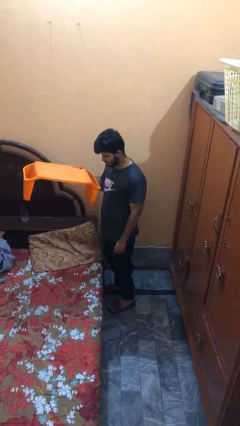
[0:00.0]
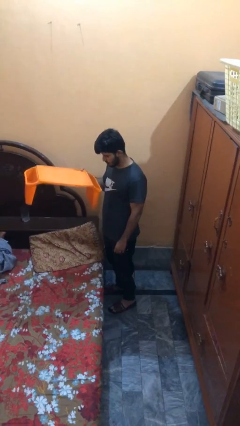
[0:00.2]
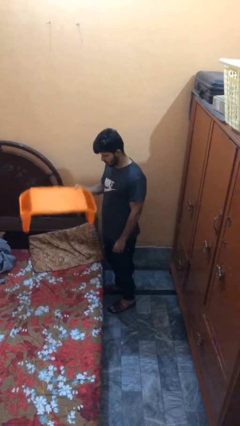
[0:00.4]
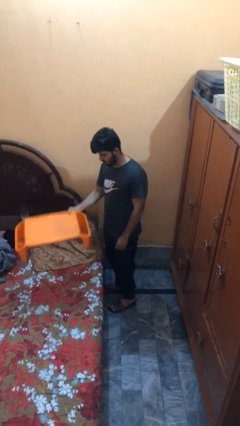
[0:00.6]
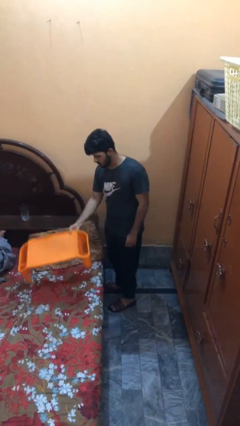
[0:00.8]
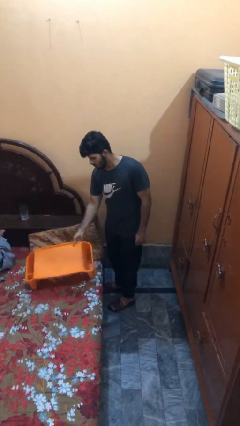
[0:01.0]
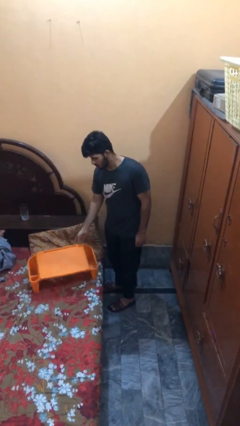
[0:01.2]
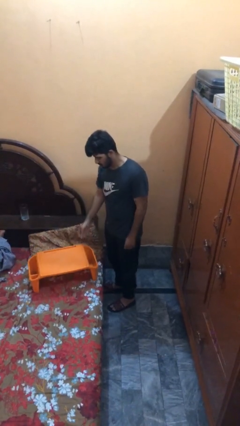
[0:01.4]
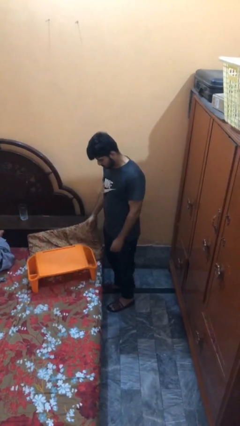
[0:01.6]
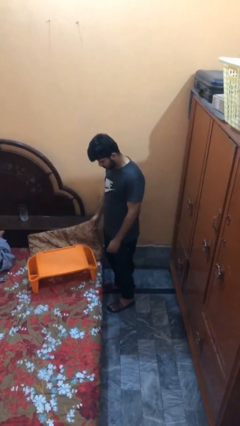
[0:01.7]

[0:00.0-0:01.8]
person puts down object on bed

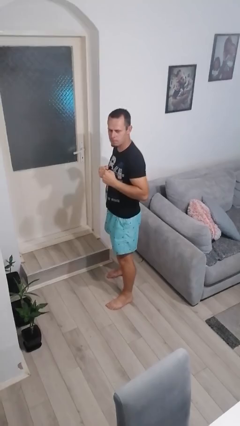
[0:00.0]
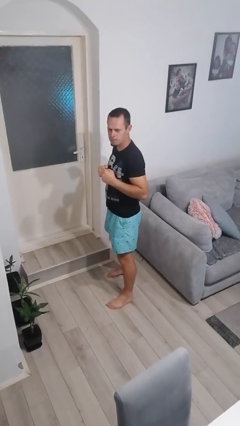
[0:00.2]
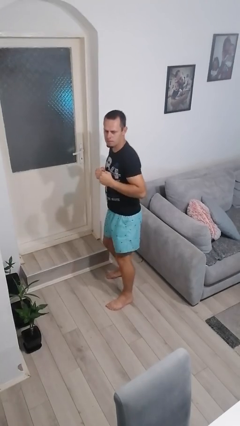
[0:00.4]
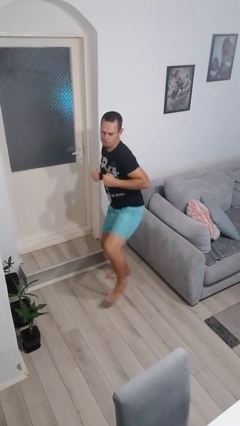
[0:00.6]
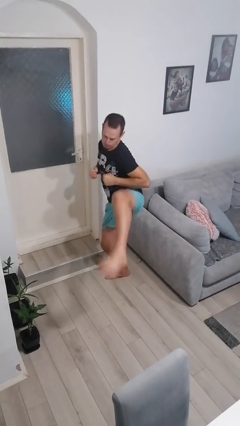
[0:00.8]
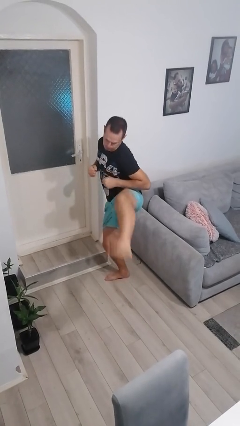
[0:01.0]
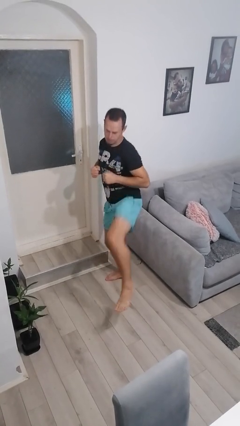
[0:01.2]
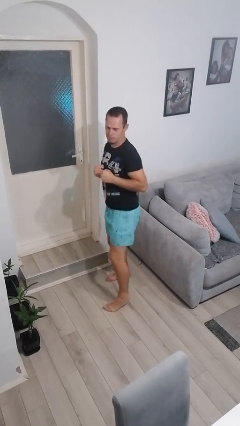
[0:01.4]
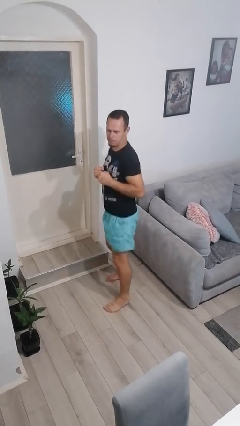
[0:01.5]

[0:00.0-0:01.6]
person karate kicks

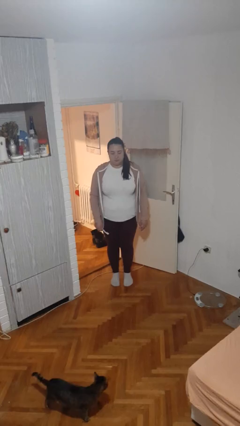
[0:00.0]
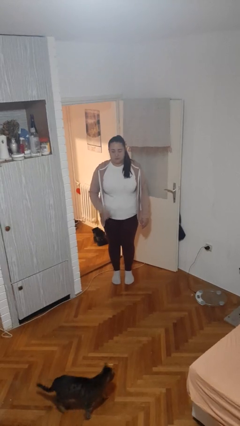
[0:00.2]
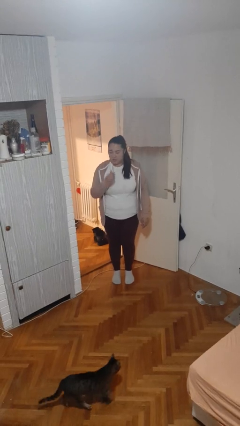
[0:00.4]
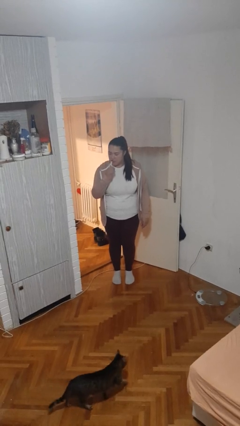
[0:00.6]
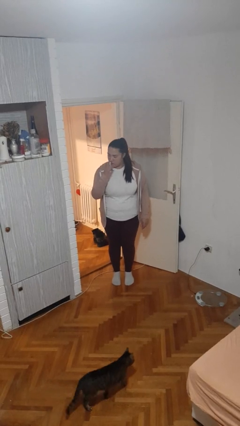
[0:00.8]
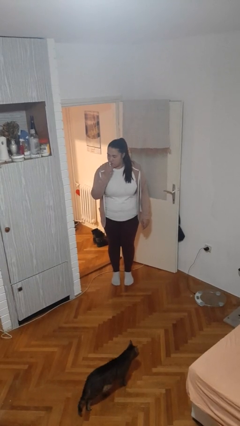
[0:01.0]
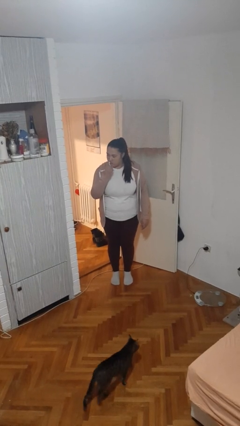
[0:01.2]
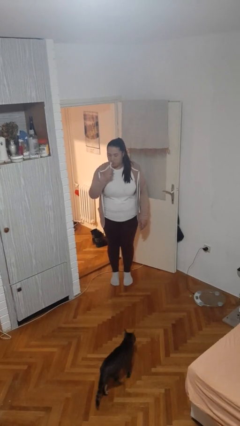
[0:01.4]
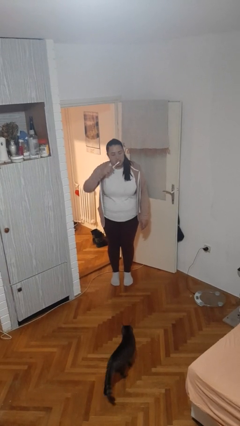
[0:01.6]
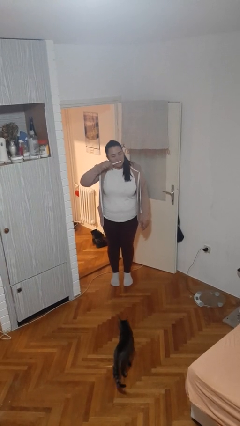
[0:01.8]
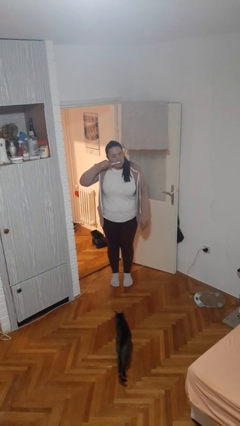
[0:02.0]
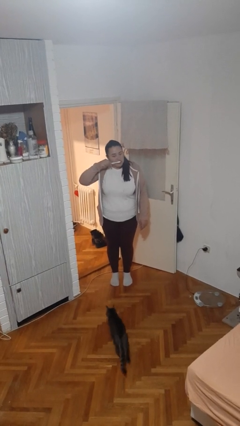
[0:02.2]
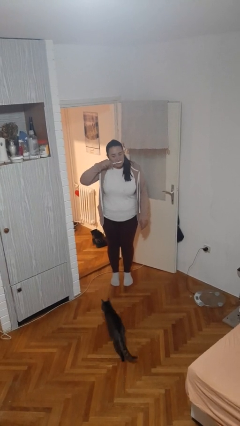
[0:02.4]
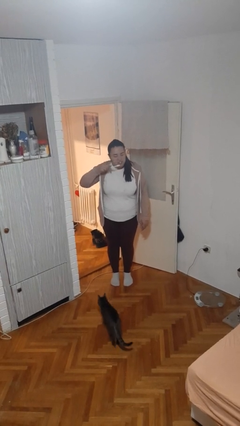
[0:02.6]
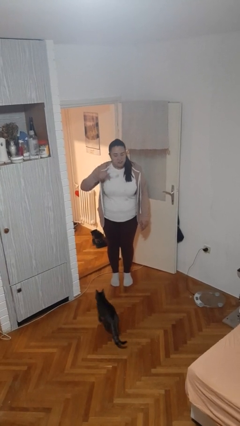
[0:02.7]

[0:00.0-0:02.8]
person brushes hair

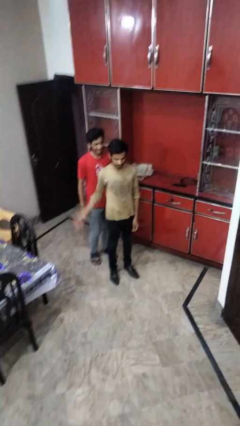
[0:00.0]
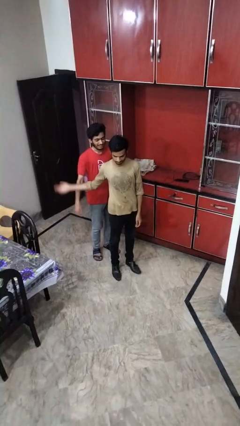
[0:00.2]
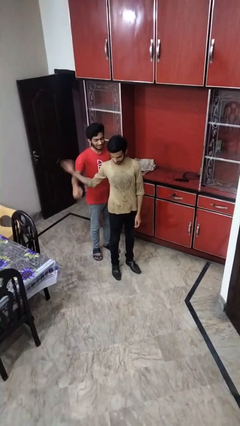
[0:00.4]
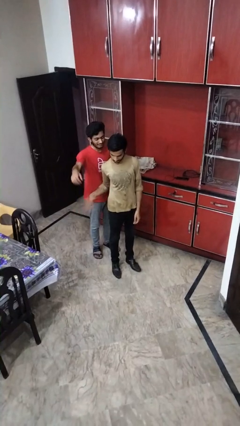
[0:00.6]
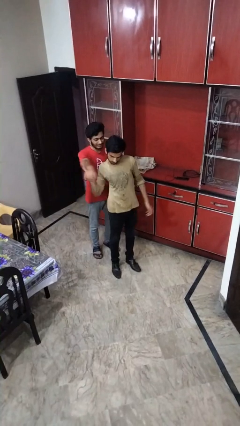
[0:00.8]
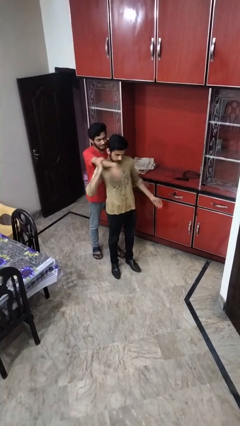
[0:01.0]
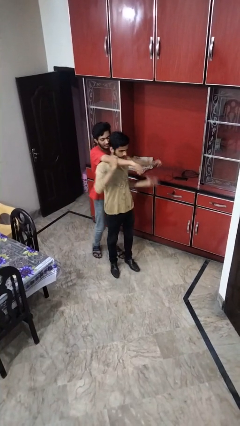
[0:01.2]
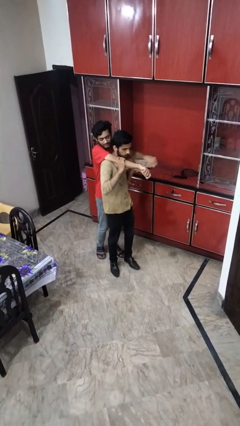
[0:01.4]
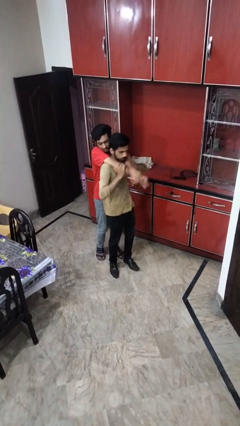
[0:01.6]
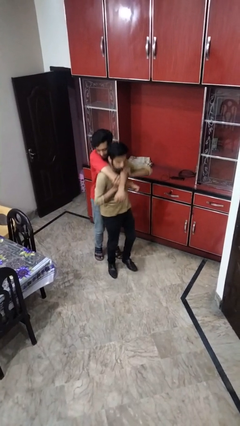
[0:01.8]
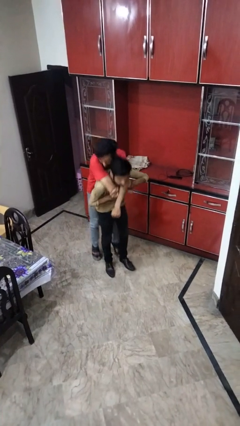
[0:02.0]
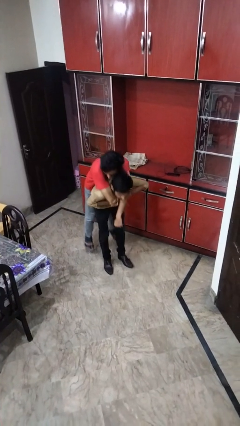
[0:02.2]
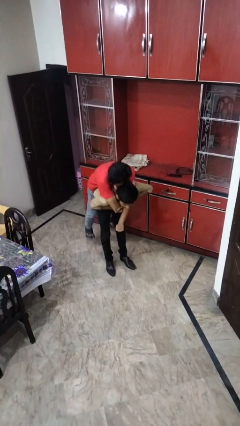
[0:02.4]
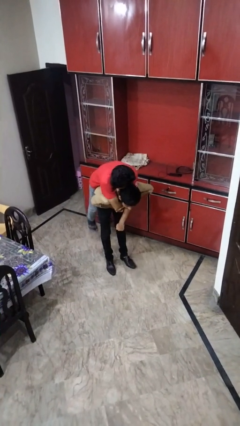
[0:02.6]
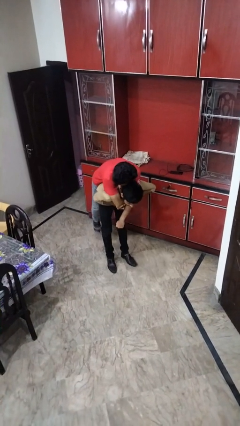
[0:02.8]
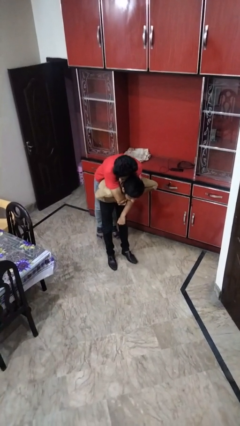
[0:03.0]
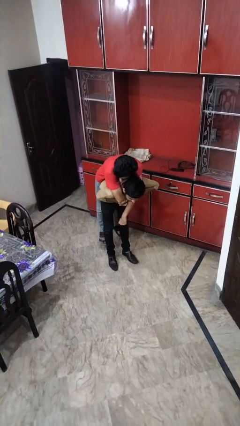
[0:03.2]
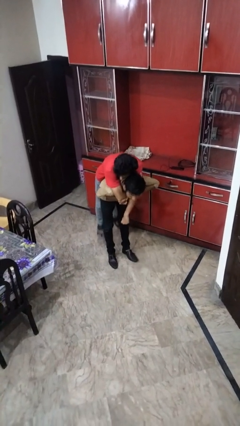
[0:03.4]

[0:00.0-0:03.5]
person carries person over shoulder

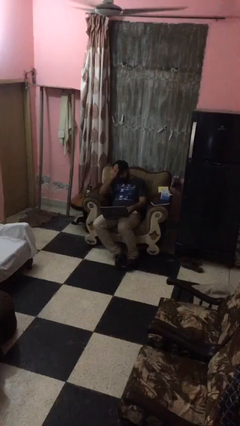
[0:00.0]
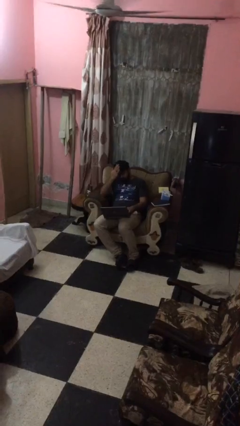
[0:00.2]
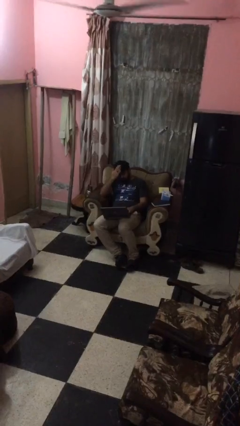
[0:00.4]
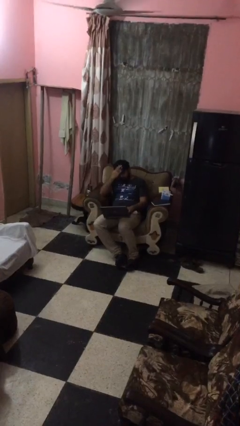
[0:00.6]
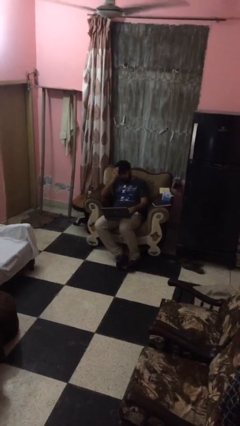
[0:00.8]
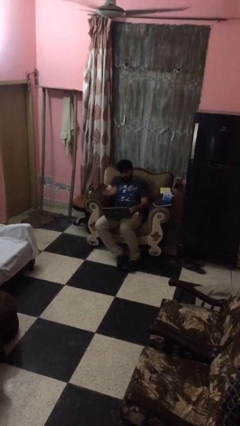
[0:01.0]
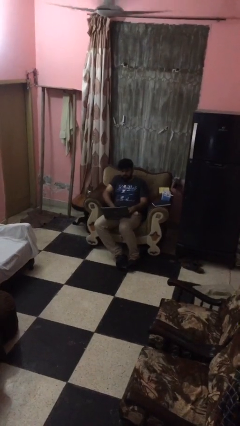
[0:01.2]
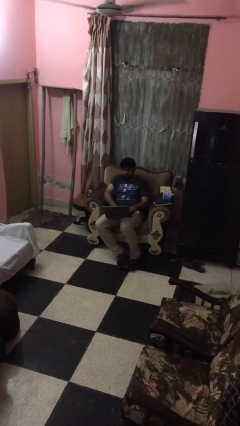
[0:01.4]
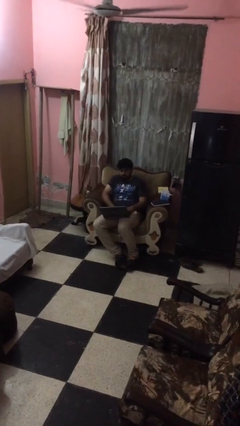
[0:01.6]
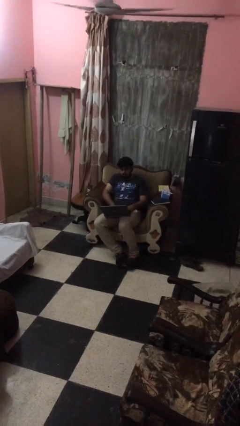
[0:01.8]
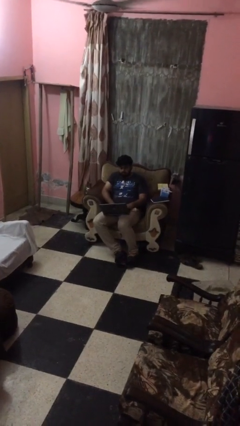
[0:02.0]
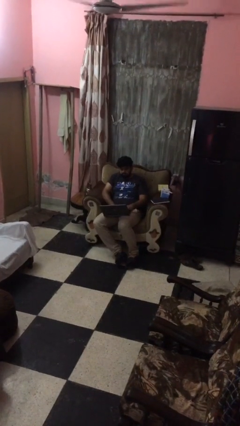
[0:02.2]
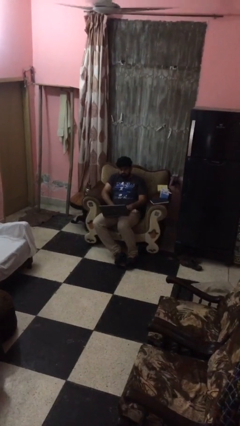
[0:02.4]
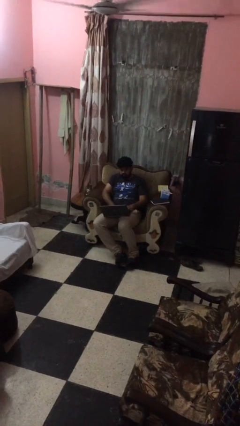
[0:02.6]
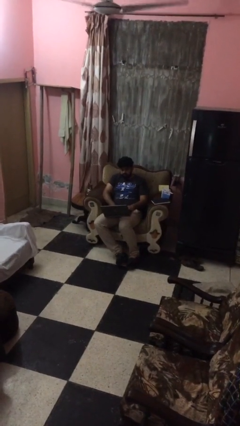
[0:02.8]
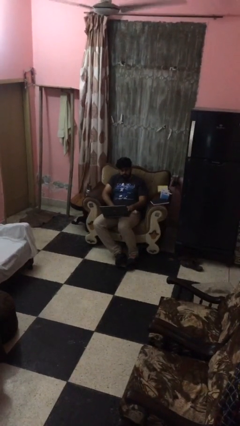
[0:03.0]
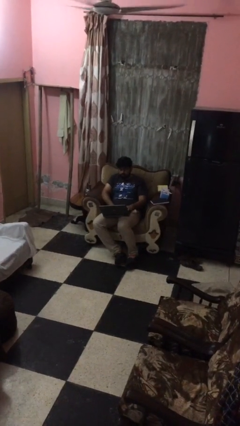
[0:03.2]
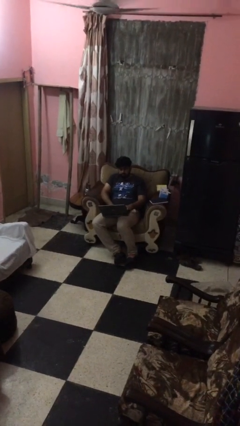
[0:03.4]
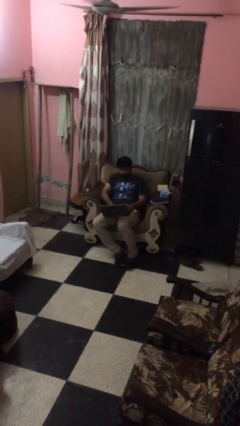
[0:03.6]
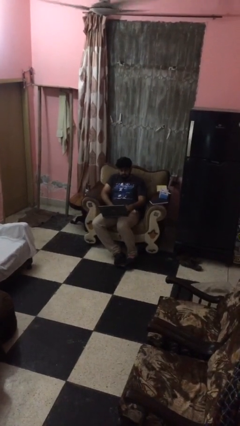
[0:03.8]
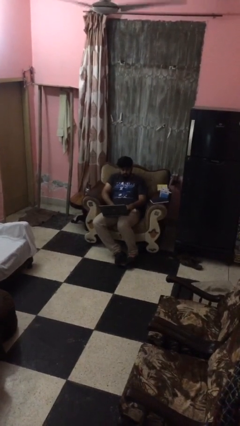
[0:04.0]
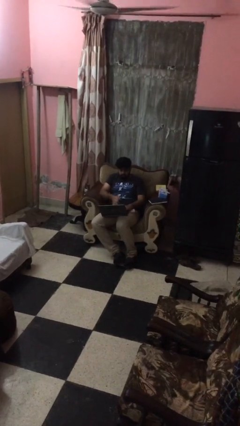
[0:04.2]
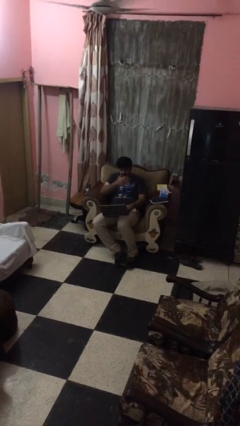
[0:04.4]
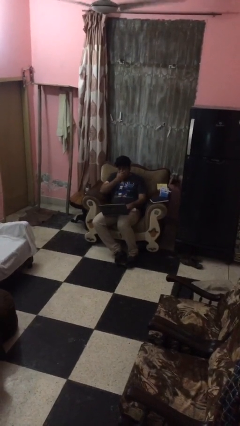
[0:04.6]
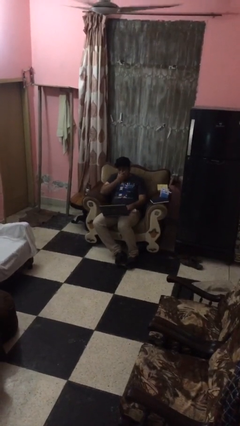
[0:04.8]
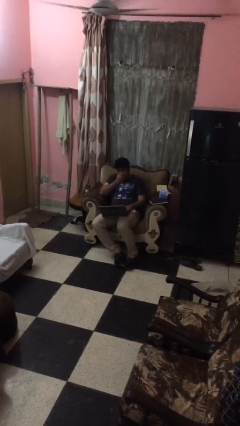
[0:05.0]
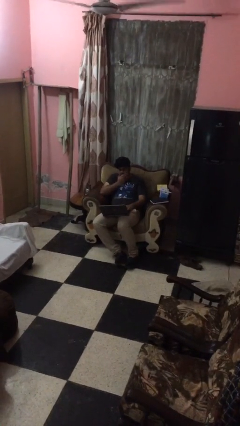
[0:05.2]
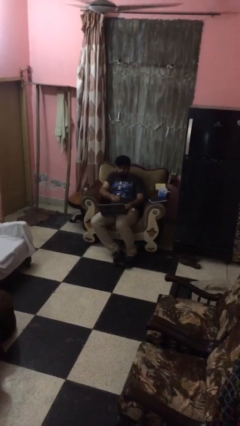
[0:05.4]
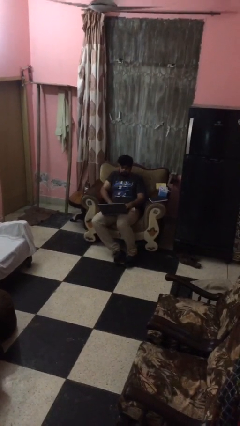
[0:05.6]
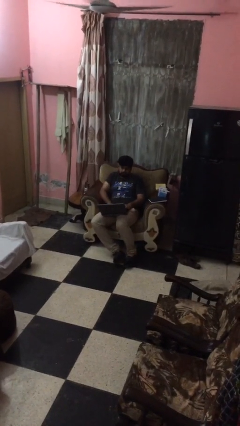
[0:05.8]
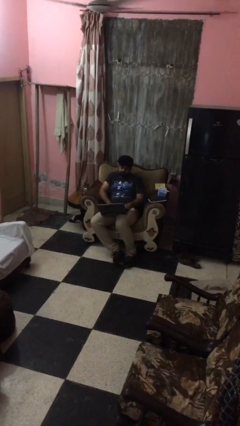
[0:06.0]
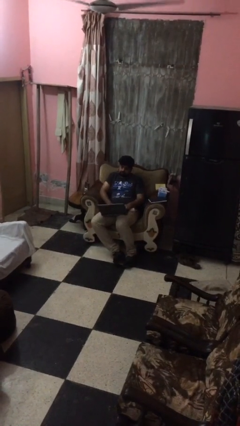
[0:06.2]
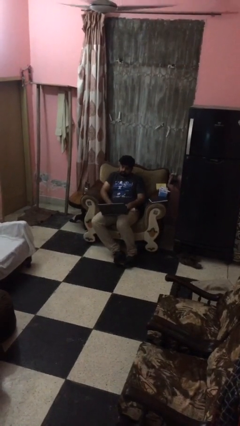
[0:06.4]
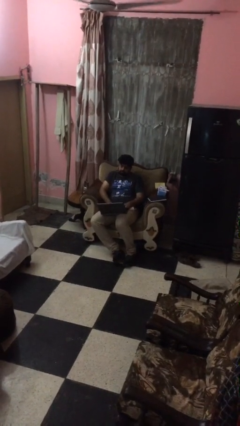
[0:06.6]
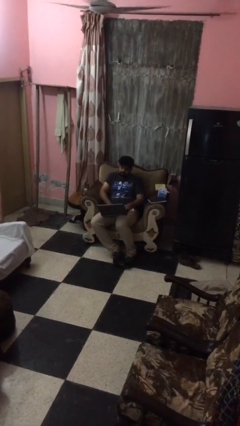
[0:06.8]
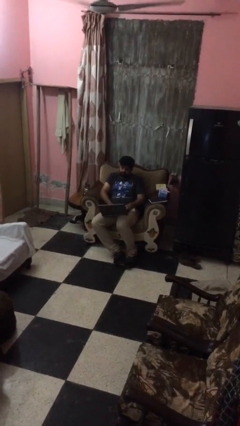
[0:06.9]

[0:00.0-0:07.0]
person interacts with laptop

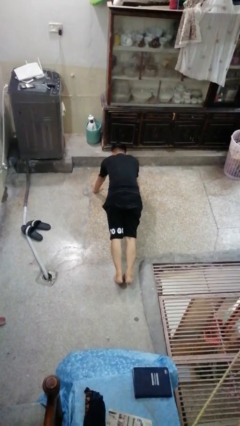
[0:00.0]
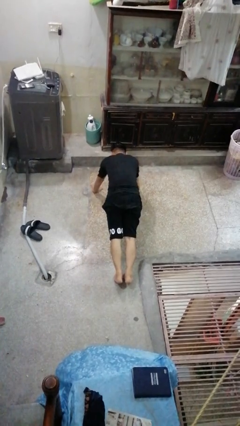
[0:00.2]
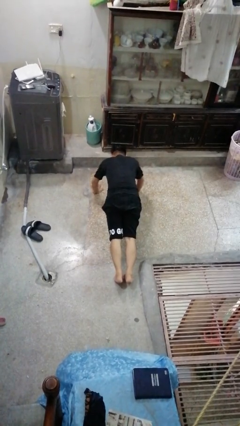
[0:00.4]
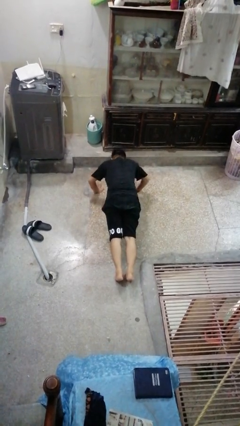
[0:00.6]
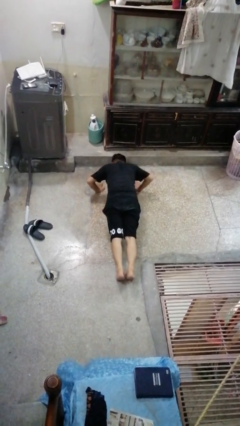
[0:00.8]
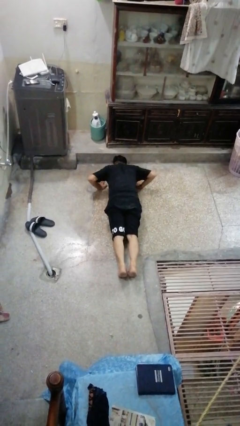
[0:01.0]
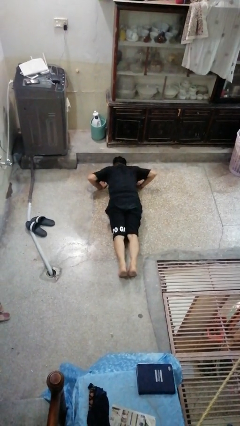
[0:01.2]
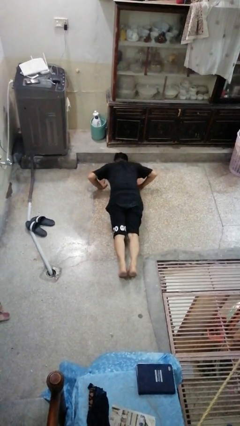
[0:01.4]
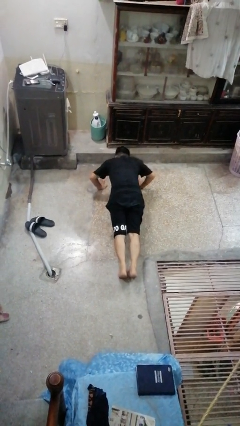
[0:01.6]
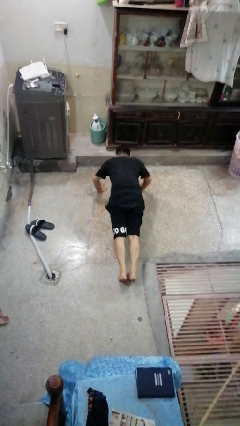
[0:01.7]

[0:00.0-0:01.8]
person exercises with pushup
